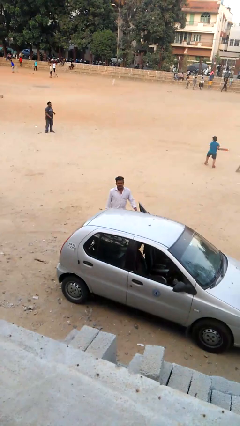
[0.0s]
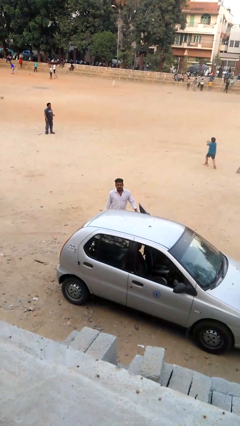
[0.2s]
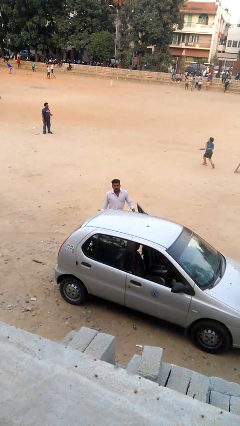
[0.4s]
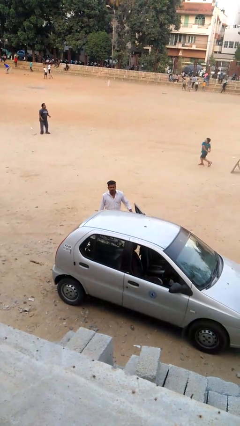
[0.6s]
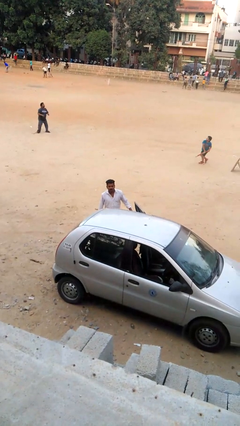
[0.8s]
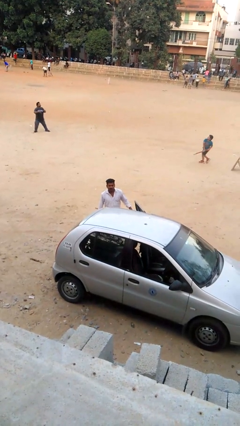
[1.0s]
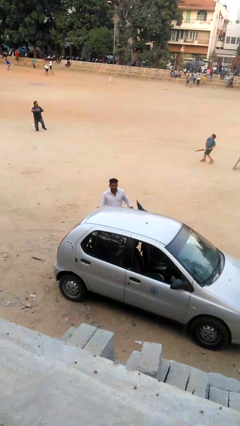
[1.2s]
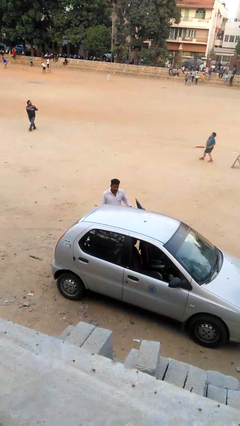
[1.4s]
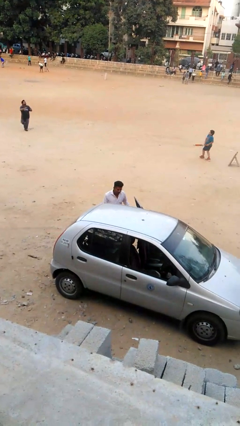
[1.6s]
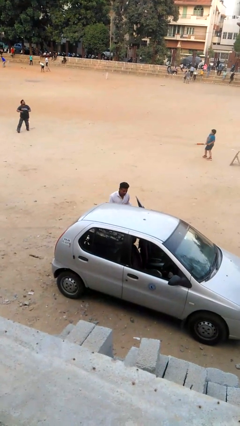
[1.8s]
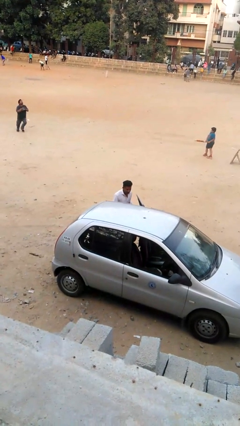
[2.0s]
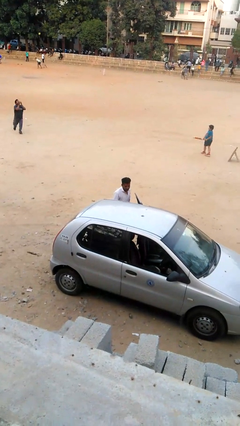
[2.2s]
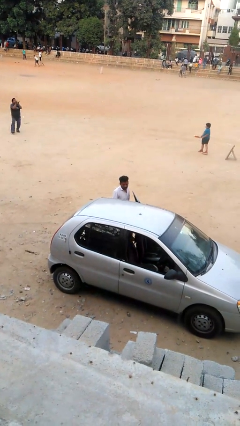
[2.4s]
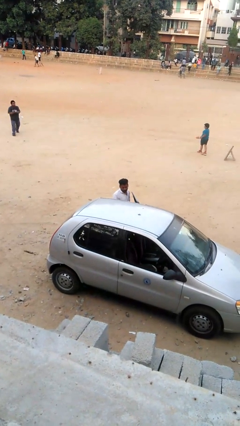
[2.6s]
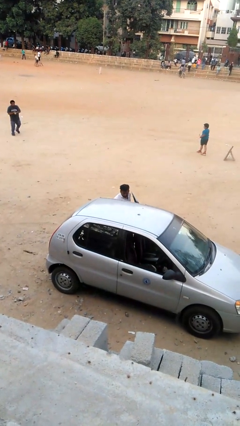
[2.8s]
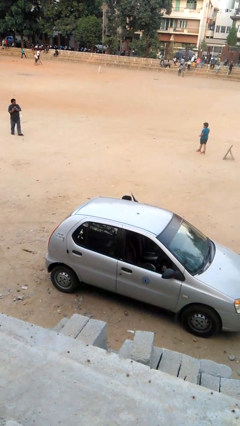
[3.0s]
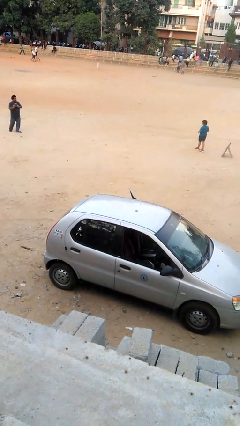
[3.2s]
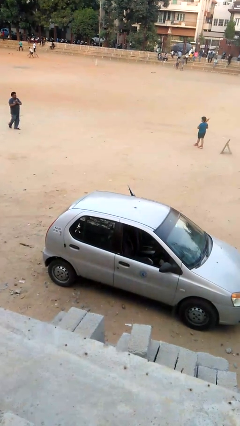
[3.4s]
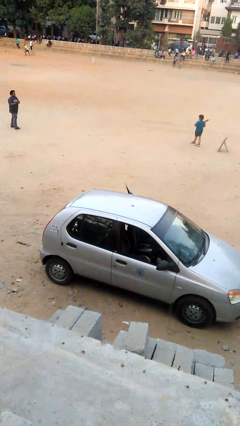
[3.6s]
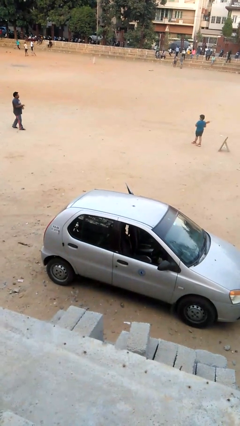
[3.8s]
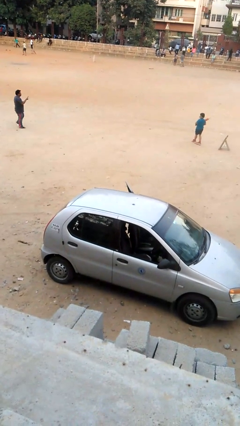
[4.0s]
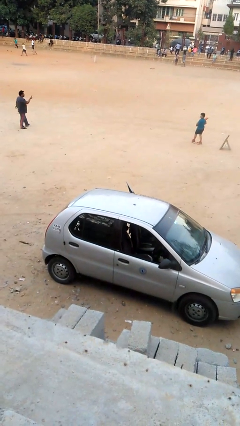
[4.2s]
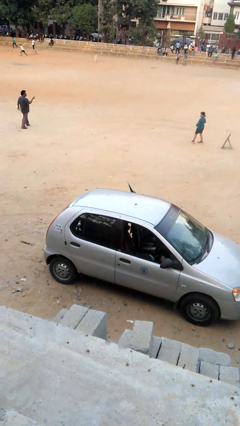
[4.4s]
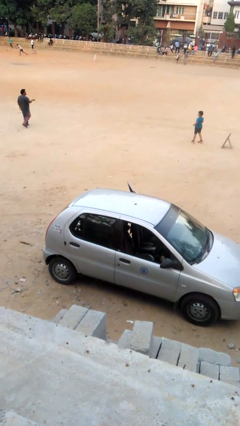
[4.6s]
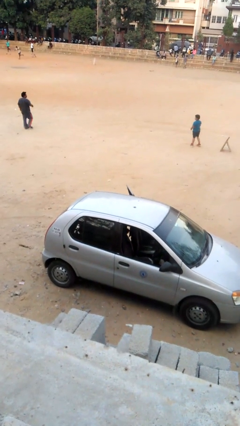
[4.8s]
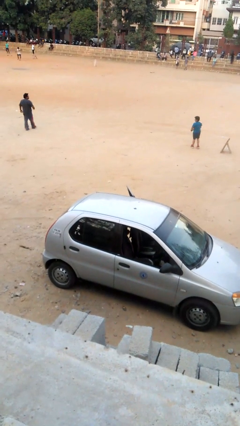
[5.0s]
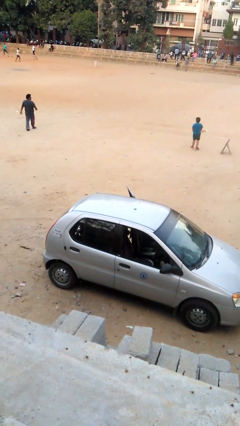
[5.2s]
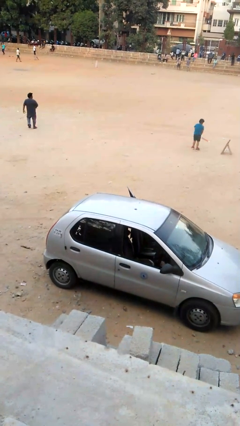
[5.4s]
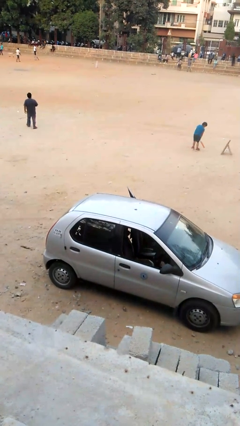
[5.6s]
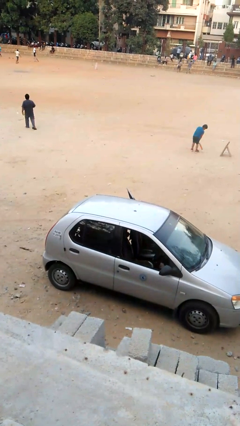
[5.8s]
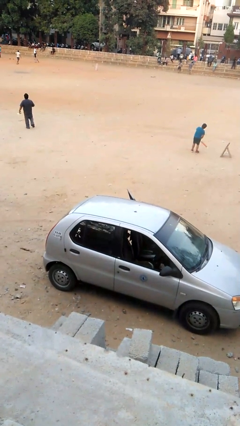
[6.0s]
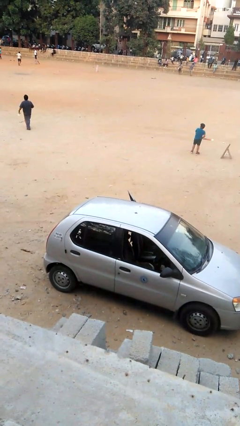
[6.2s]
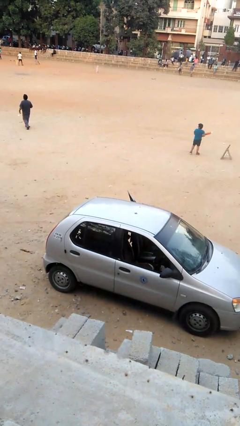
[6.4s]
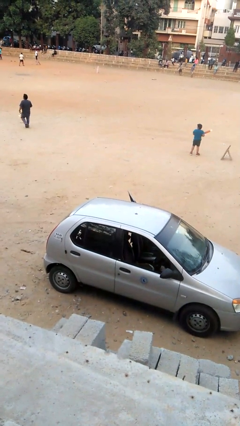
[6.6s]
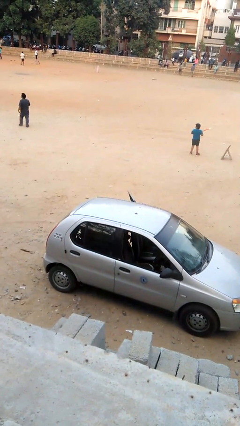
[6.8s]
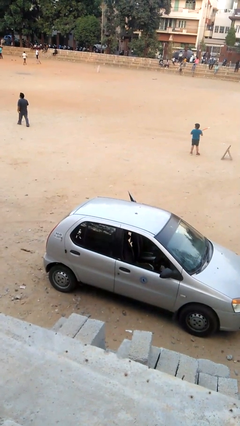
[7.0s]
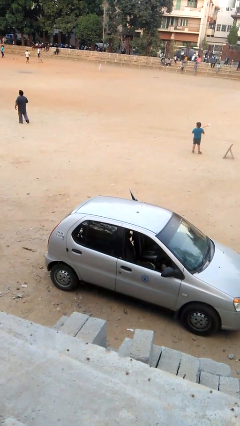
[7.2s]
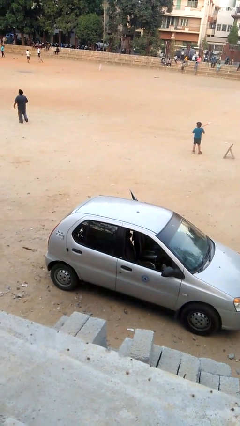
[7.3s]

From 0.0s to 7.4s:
person enters car

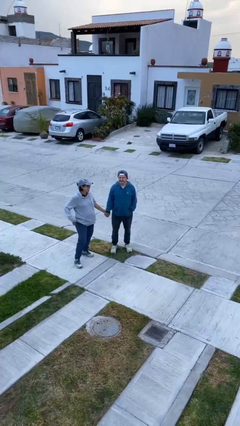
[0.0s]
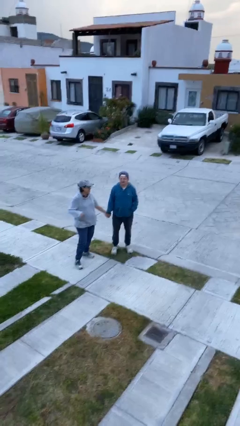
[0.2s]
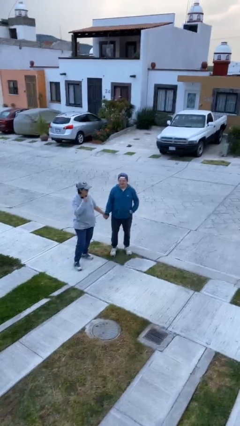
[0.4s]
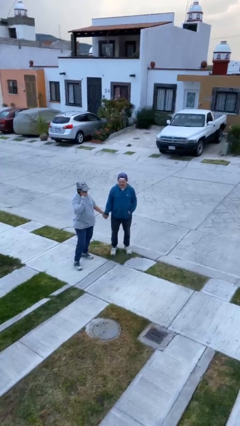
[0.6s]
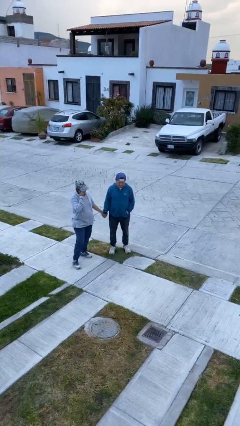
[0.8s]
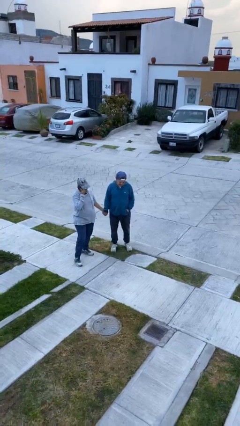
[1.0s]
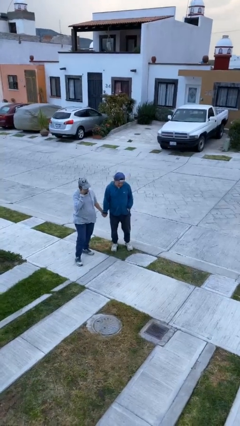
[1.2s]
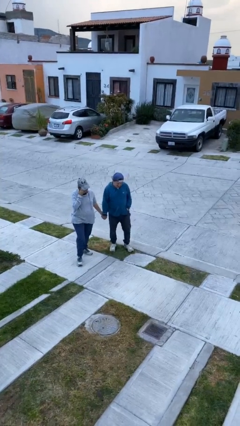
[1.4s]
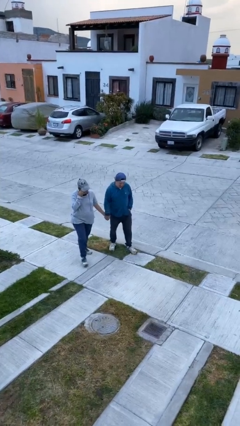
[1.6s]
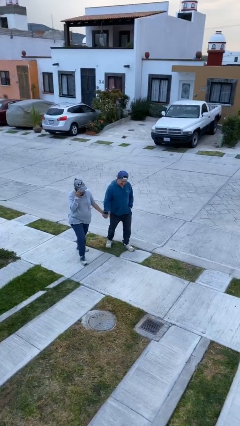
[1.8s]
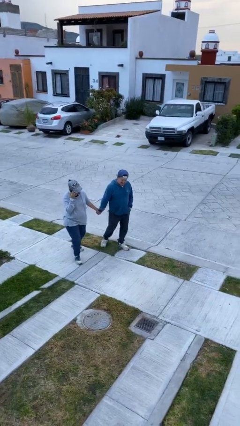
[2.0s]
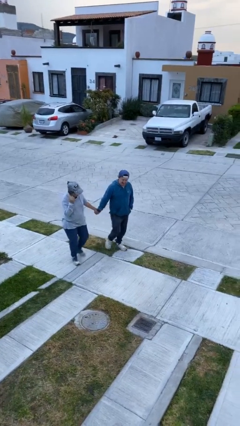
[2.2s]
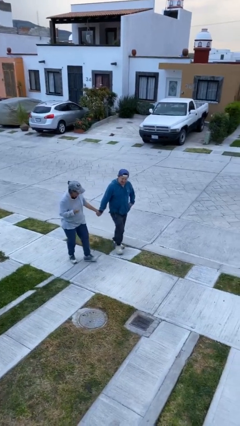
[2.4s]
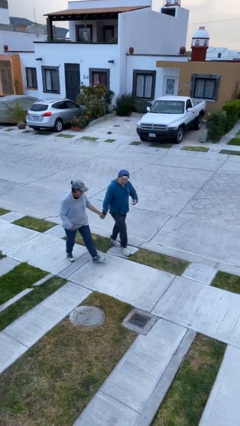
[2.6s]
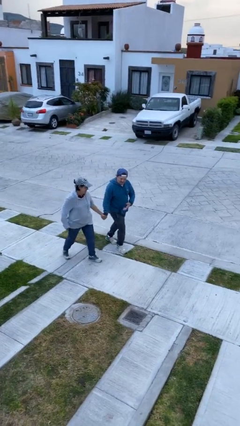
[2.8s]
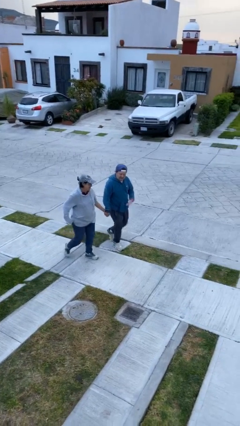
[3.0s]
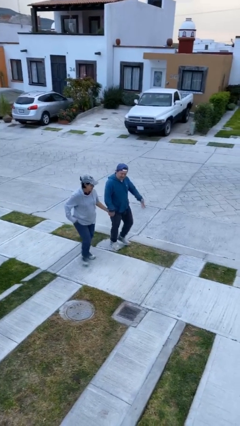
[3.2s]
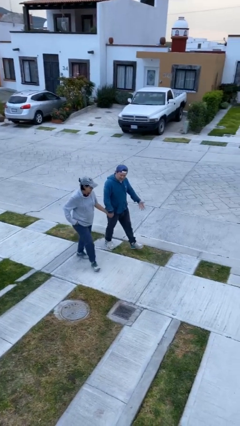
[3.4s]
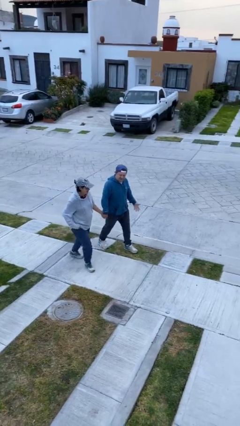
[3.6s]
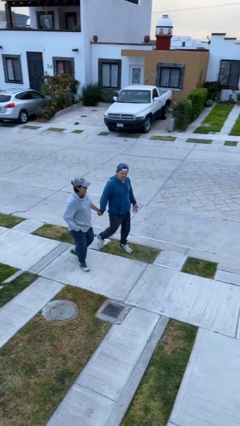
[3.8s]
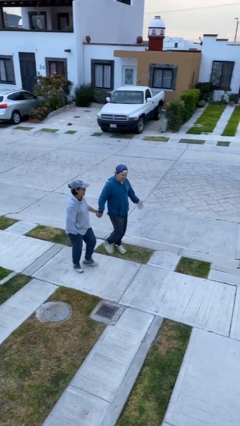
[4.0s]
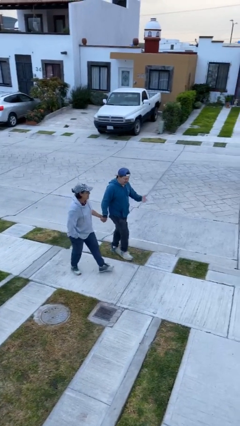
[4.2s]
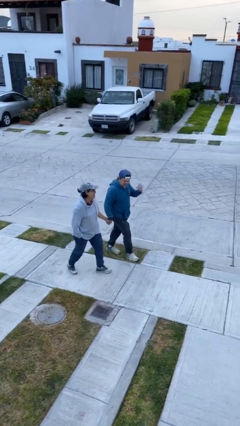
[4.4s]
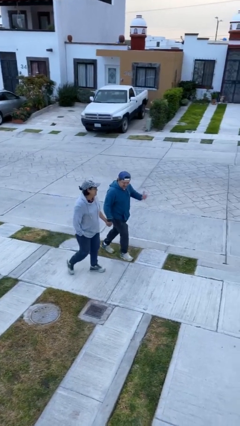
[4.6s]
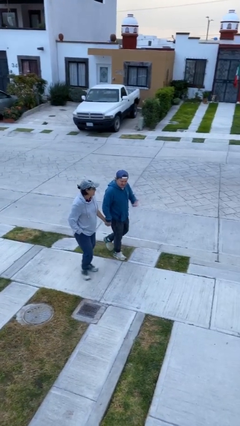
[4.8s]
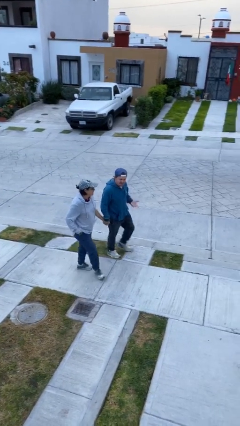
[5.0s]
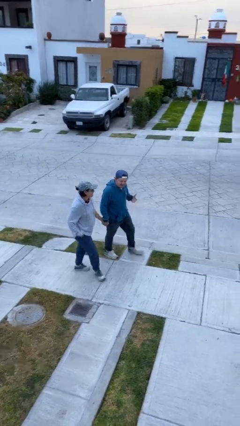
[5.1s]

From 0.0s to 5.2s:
person holds hand

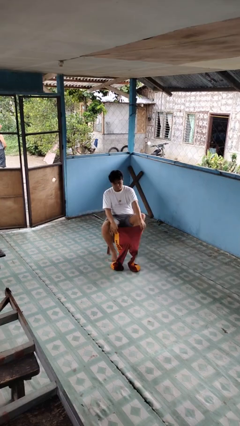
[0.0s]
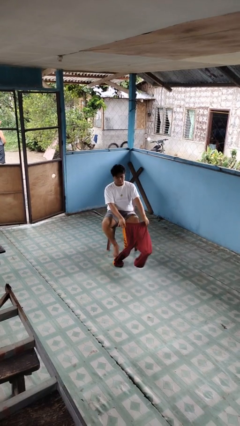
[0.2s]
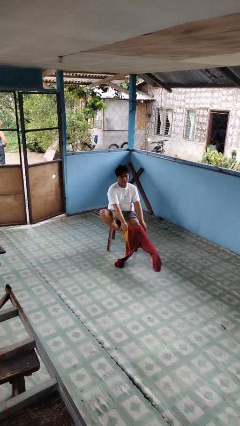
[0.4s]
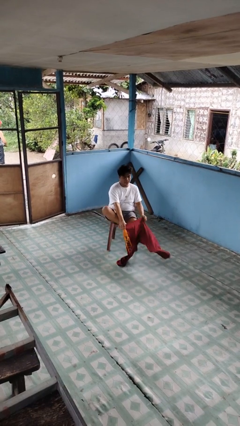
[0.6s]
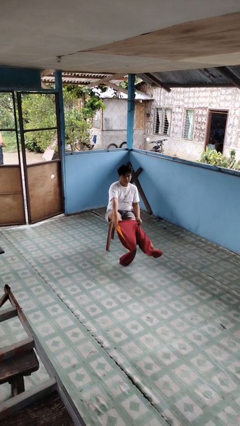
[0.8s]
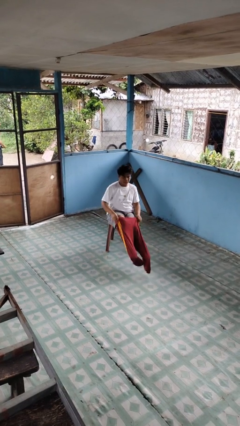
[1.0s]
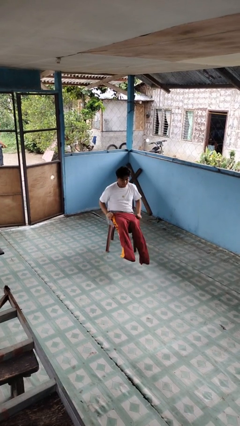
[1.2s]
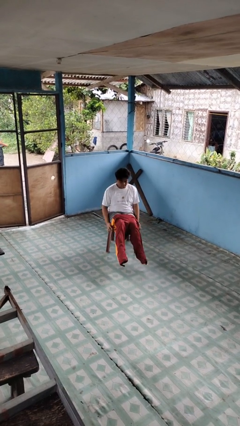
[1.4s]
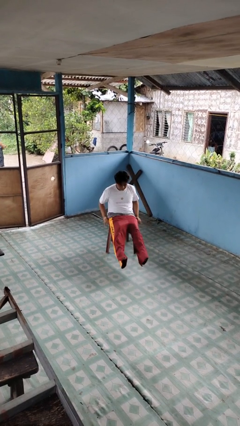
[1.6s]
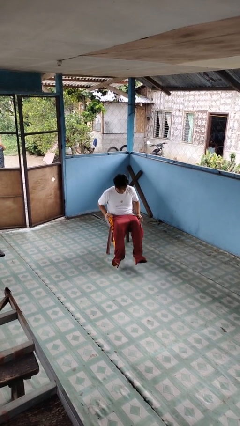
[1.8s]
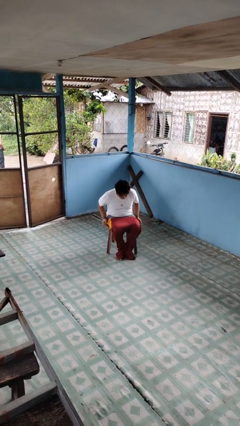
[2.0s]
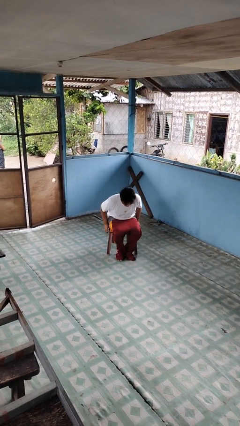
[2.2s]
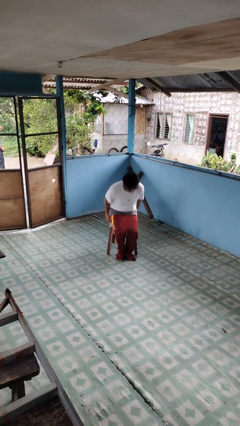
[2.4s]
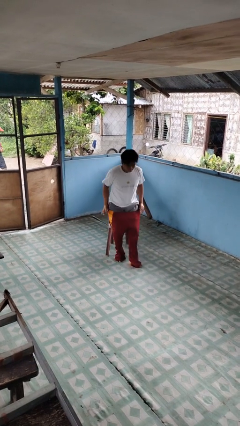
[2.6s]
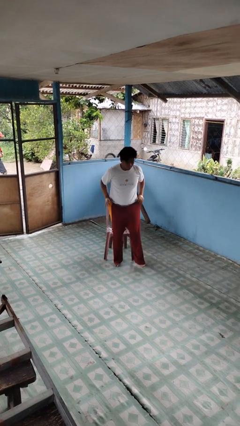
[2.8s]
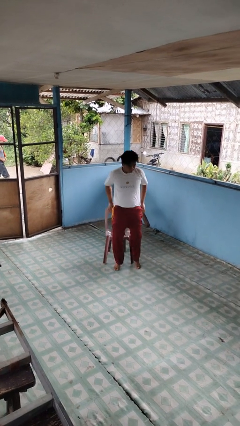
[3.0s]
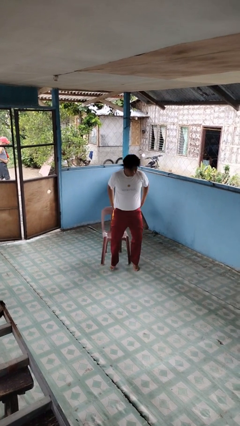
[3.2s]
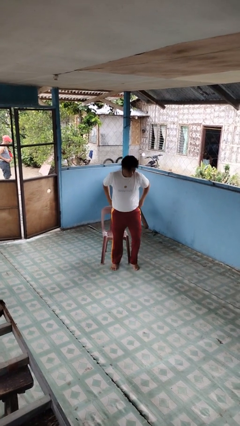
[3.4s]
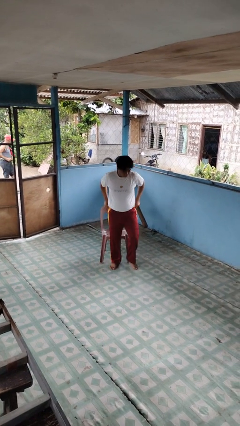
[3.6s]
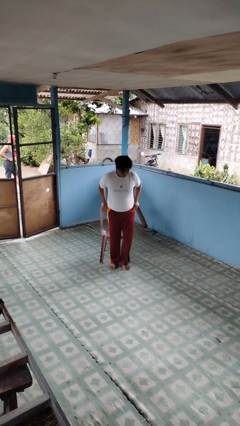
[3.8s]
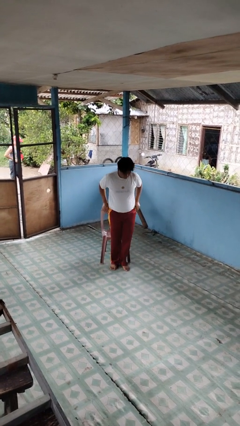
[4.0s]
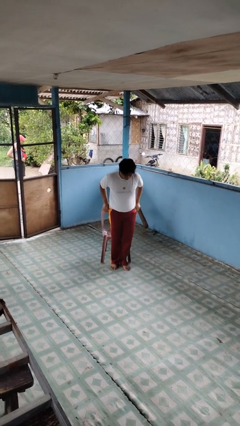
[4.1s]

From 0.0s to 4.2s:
person puts on pants

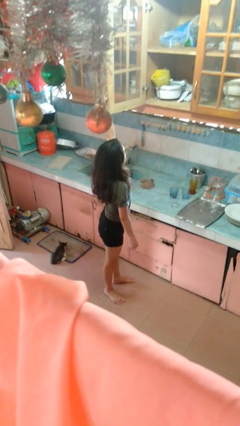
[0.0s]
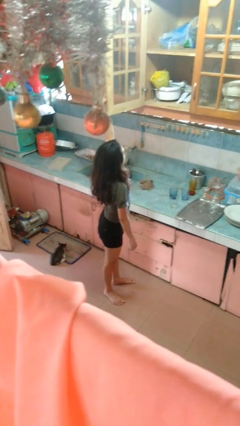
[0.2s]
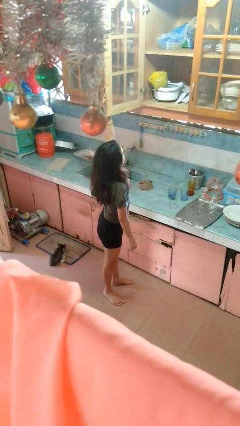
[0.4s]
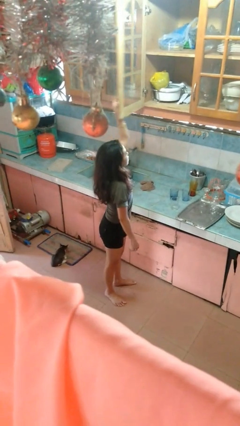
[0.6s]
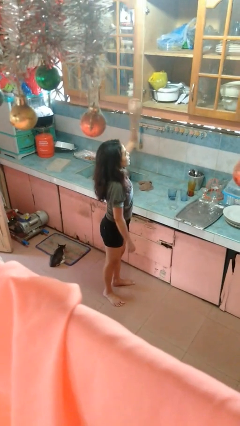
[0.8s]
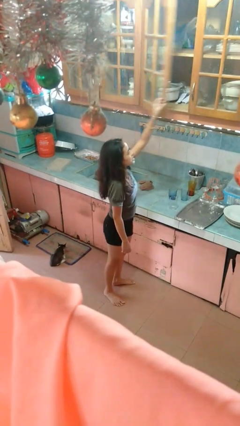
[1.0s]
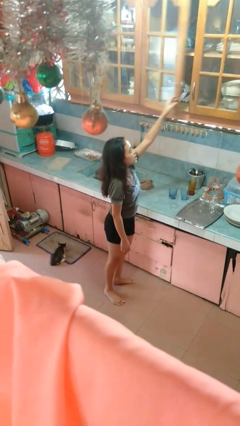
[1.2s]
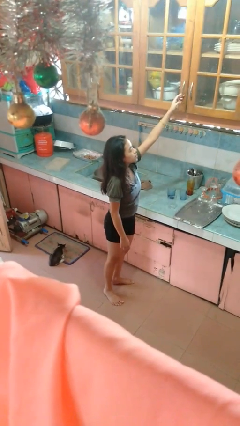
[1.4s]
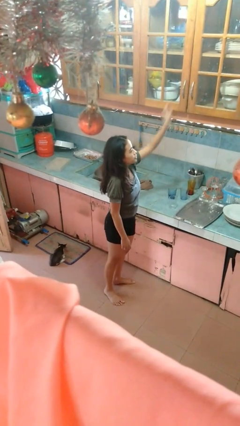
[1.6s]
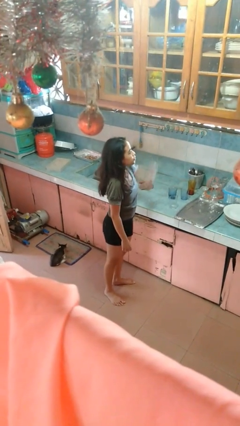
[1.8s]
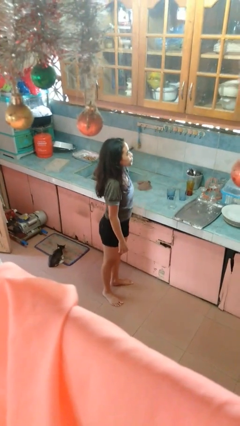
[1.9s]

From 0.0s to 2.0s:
person closes cabinet
